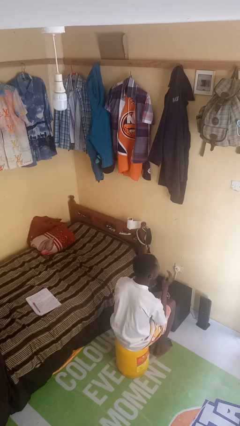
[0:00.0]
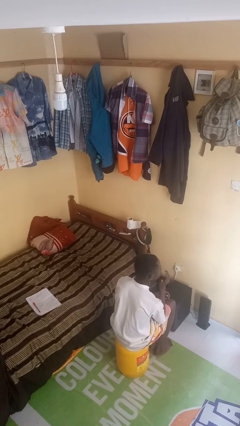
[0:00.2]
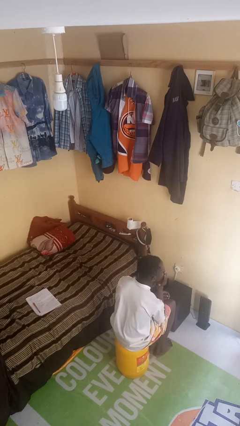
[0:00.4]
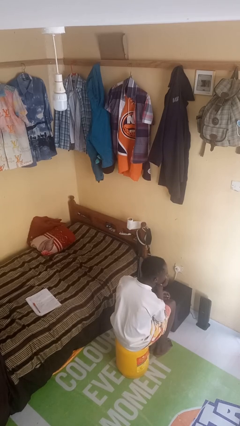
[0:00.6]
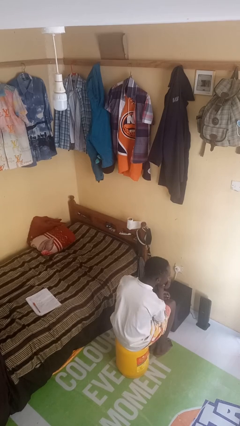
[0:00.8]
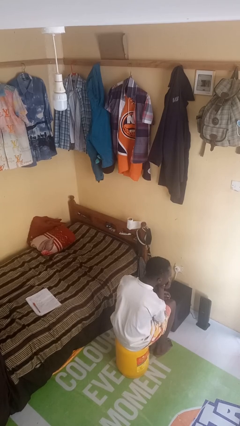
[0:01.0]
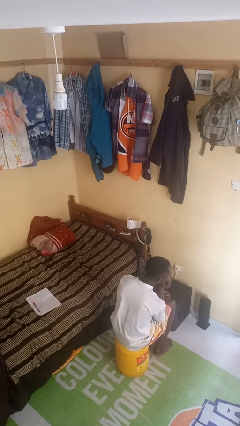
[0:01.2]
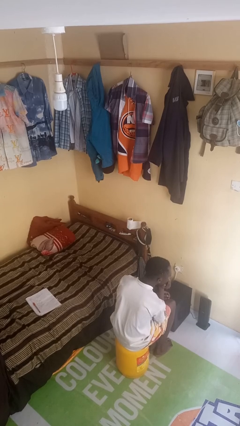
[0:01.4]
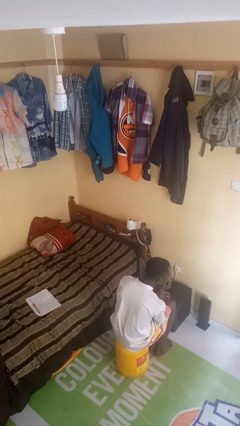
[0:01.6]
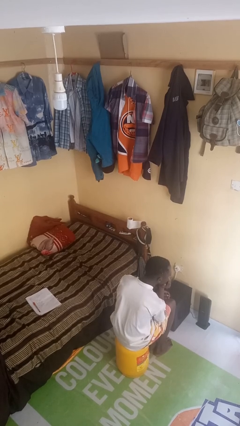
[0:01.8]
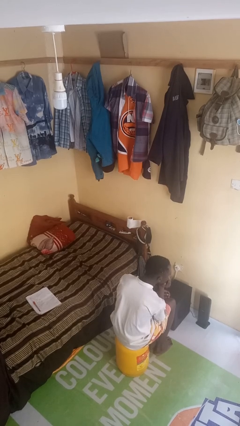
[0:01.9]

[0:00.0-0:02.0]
person strokes chin

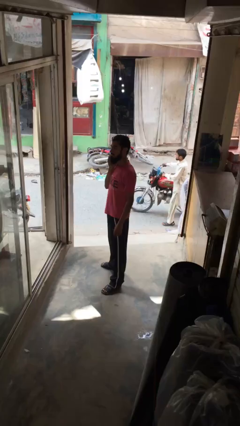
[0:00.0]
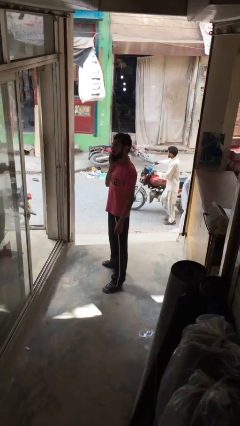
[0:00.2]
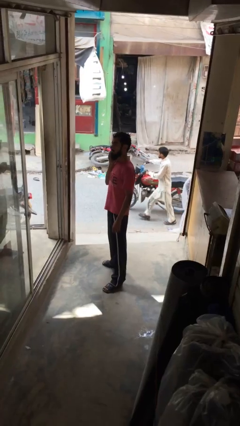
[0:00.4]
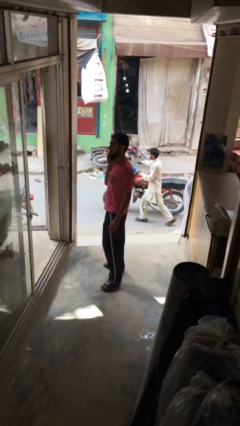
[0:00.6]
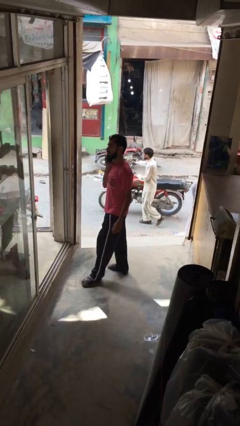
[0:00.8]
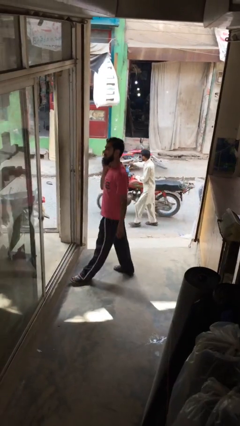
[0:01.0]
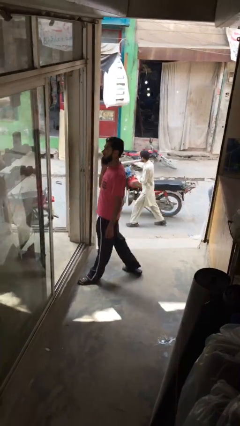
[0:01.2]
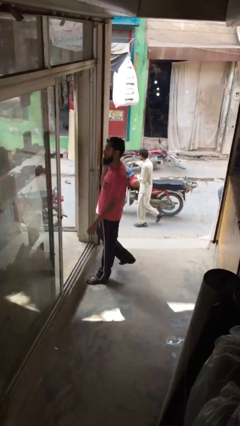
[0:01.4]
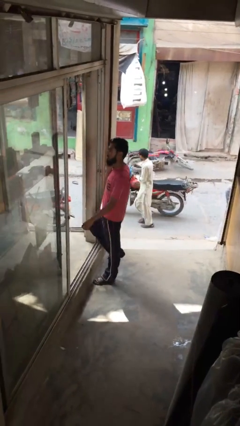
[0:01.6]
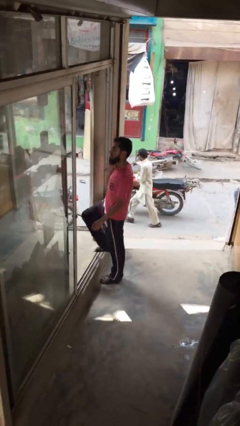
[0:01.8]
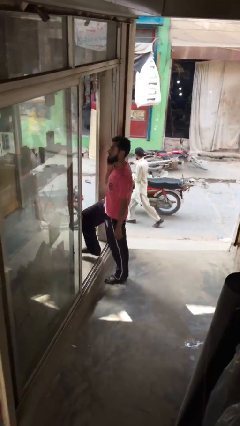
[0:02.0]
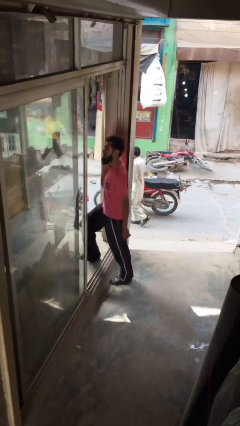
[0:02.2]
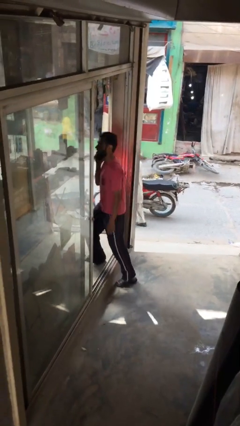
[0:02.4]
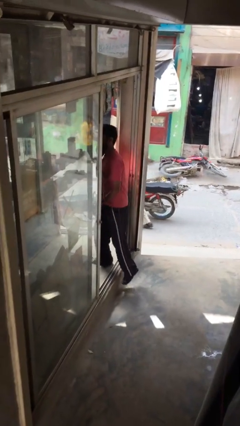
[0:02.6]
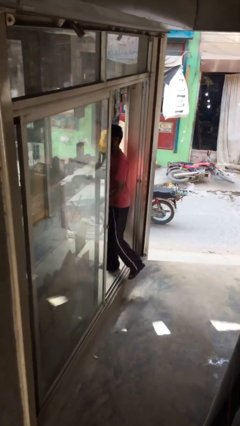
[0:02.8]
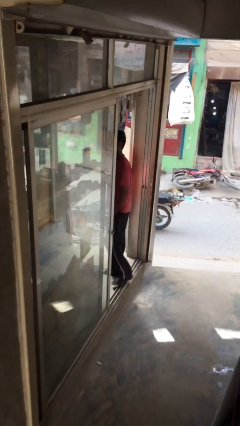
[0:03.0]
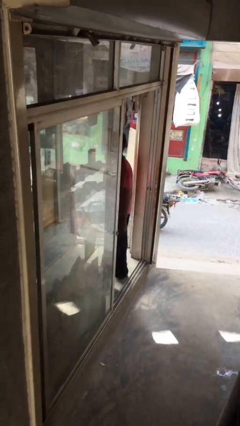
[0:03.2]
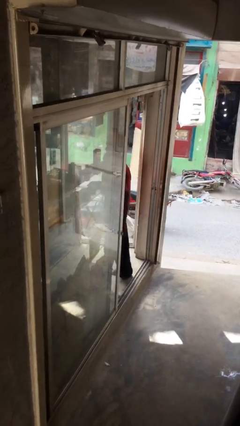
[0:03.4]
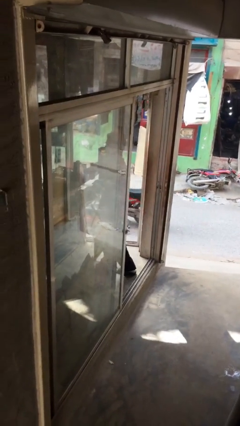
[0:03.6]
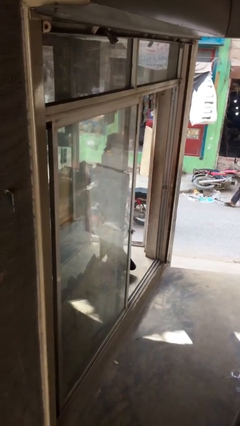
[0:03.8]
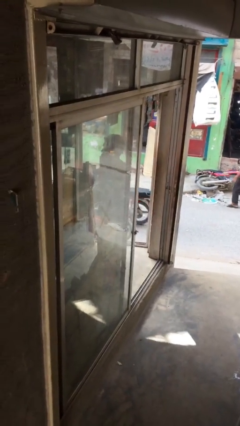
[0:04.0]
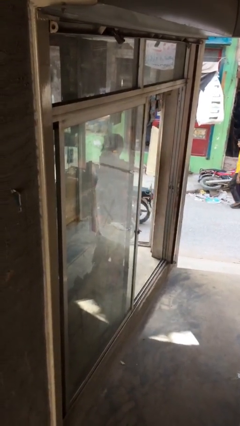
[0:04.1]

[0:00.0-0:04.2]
person exits scene through structure

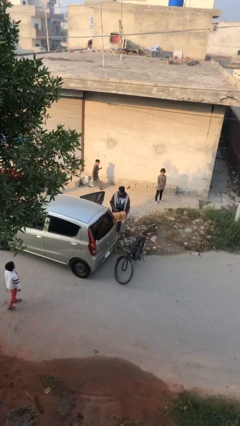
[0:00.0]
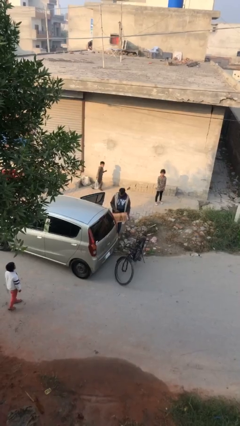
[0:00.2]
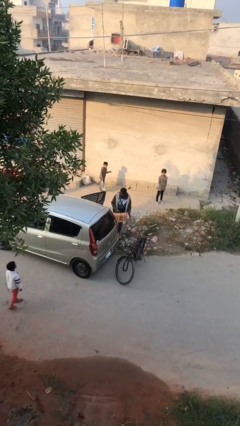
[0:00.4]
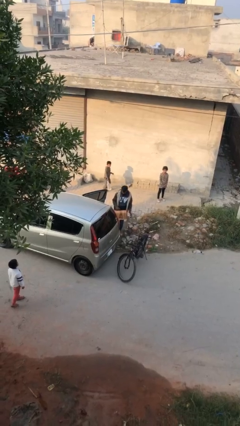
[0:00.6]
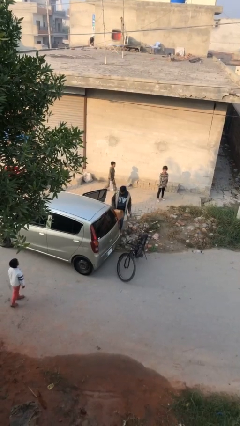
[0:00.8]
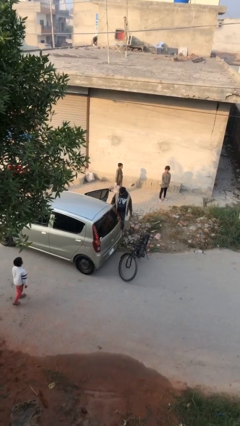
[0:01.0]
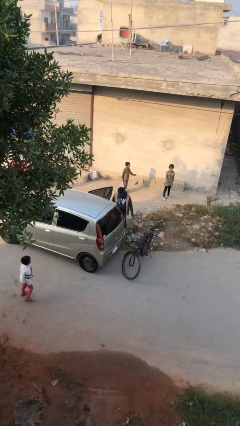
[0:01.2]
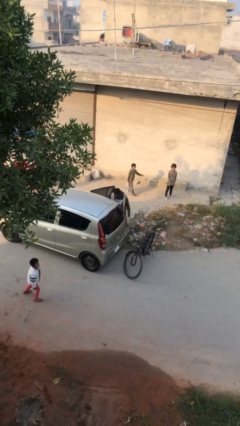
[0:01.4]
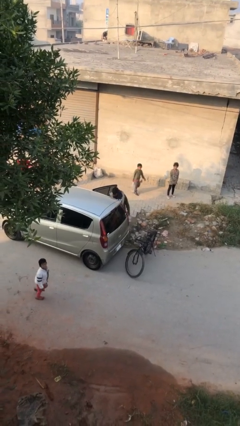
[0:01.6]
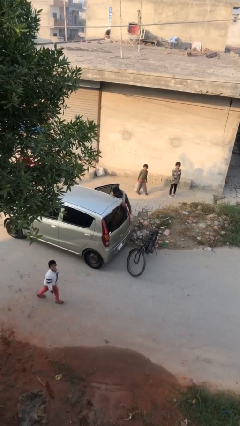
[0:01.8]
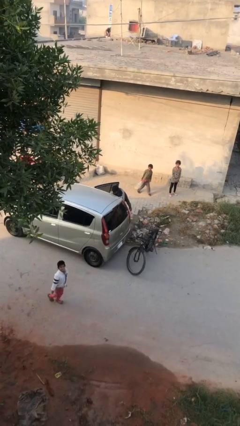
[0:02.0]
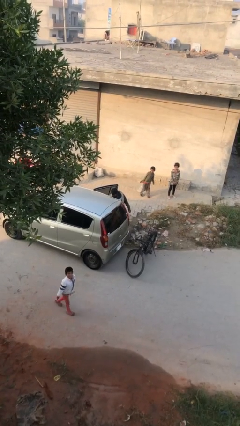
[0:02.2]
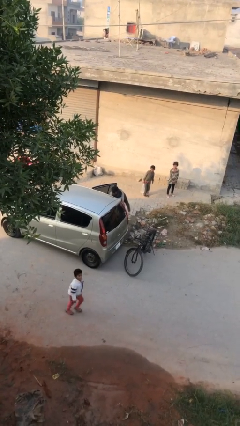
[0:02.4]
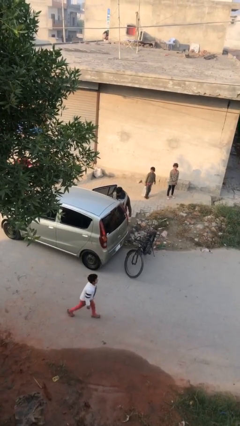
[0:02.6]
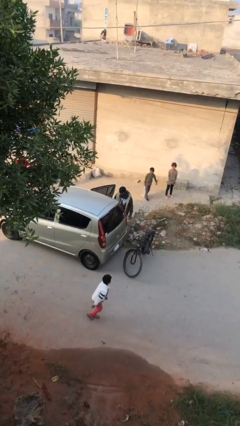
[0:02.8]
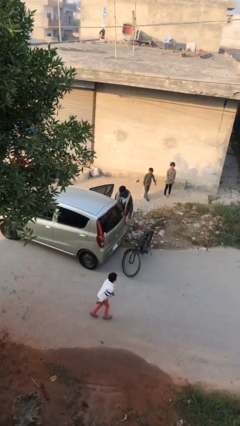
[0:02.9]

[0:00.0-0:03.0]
person loads car

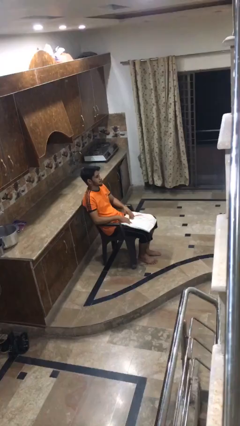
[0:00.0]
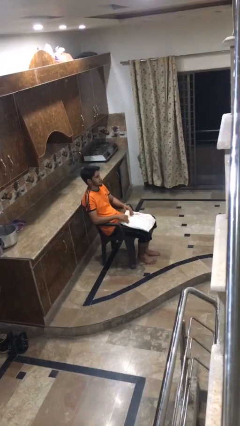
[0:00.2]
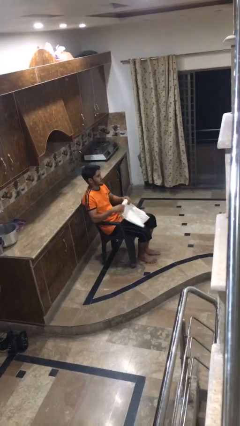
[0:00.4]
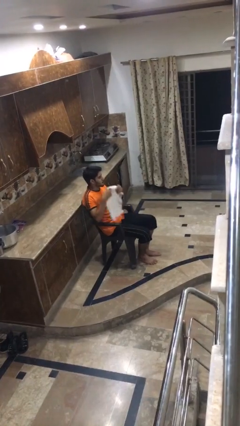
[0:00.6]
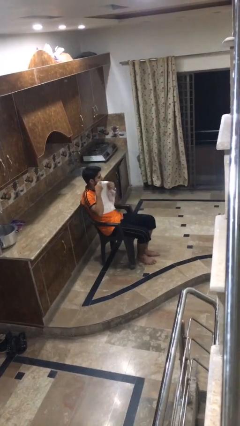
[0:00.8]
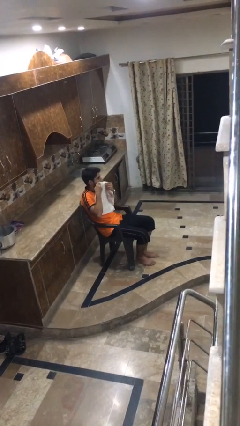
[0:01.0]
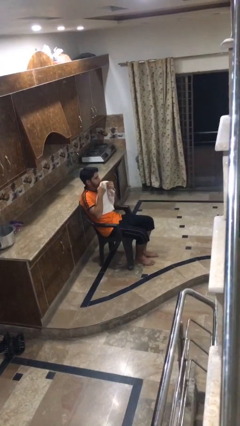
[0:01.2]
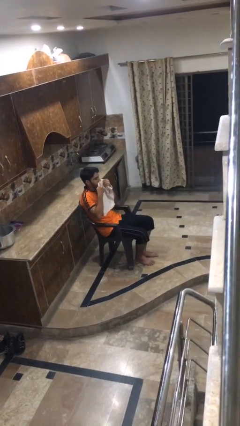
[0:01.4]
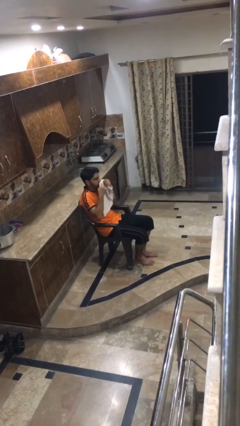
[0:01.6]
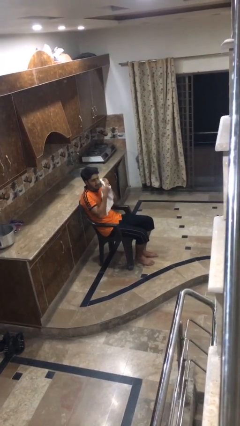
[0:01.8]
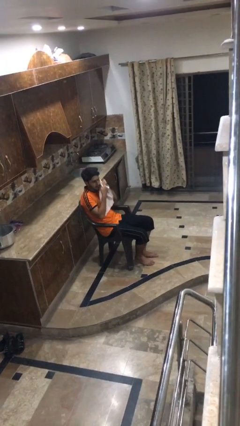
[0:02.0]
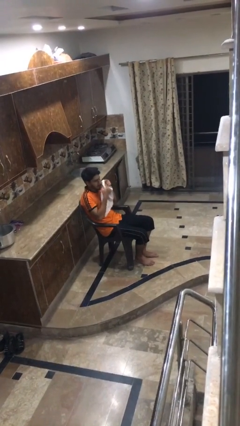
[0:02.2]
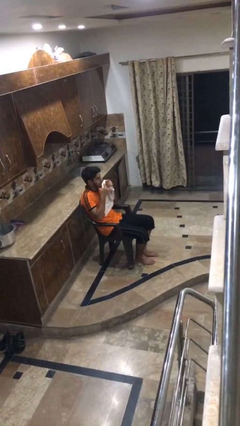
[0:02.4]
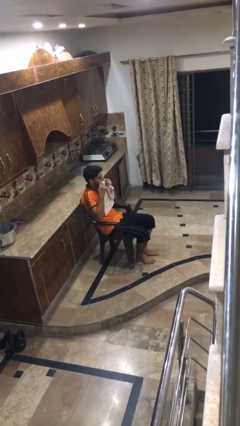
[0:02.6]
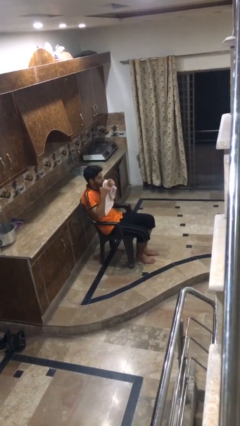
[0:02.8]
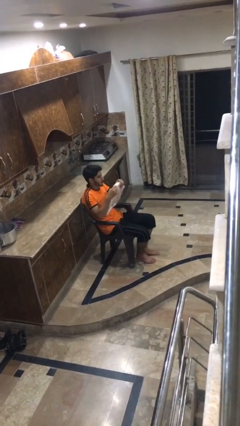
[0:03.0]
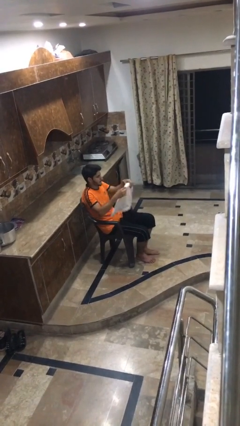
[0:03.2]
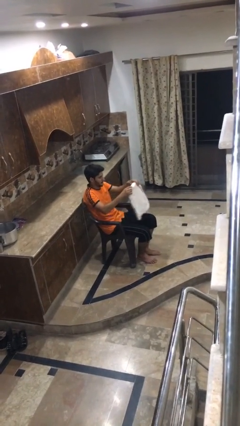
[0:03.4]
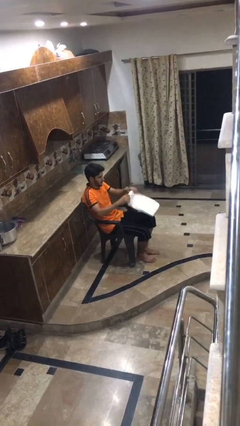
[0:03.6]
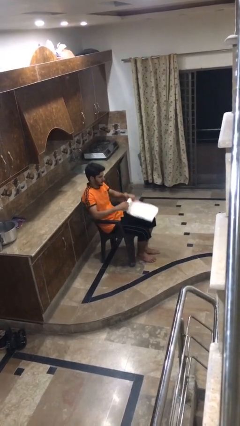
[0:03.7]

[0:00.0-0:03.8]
person wipes mouth with napkin

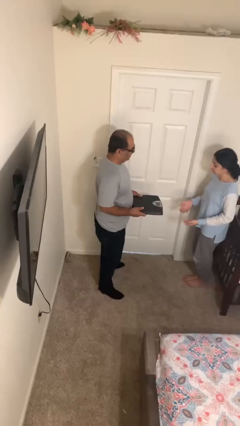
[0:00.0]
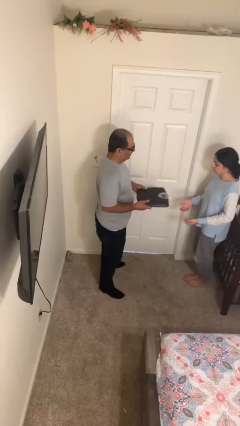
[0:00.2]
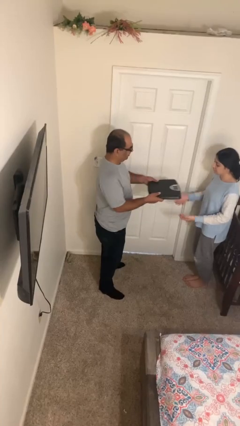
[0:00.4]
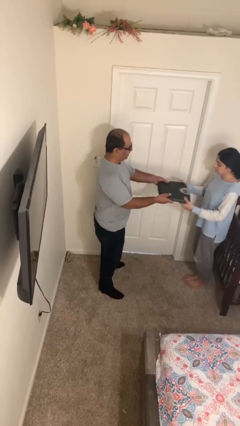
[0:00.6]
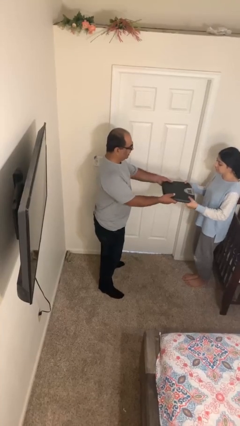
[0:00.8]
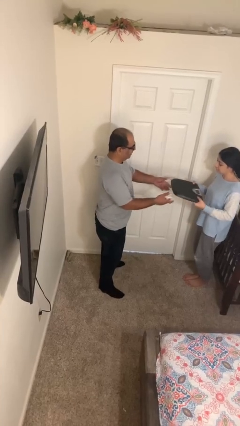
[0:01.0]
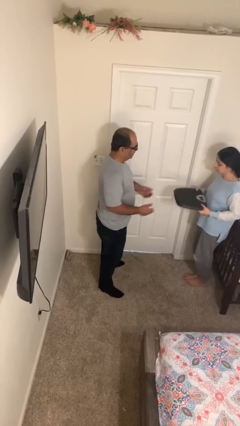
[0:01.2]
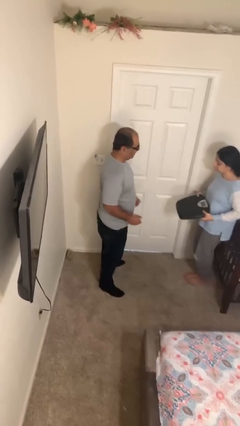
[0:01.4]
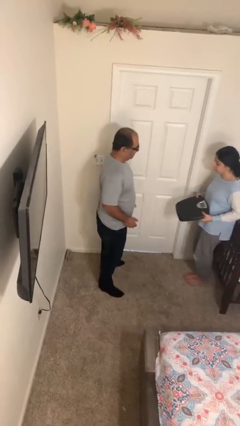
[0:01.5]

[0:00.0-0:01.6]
person transfers object to person

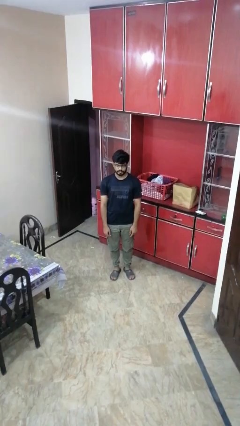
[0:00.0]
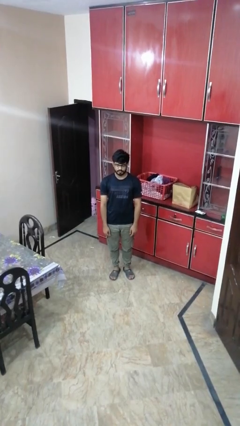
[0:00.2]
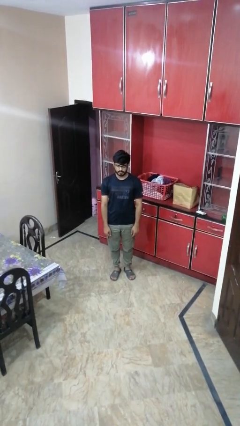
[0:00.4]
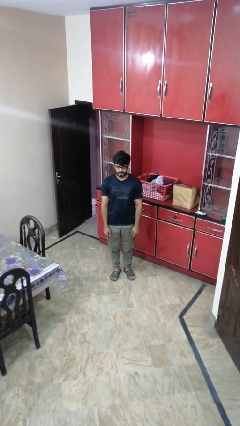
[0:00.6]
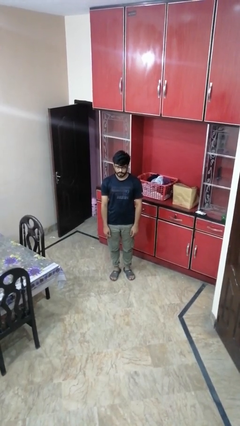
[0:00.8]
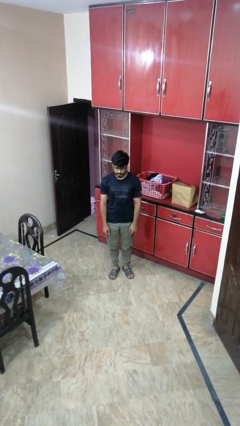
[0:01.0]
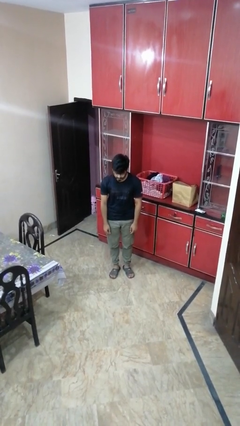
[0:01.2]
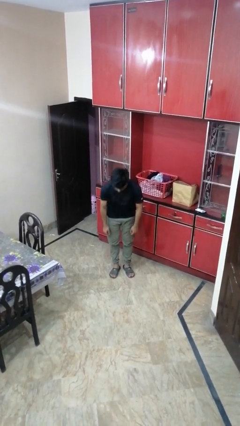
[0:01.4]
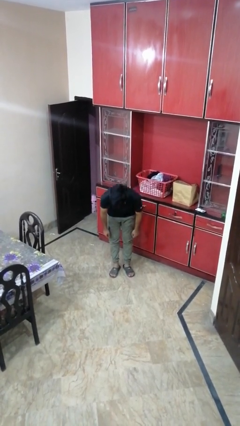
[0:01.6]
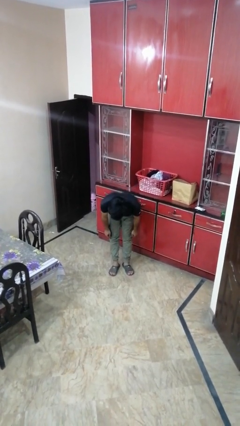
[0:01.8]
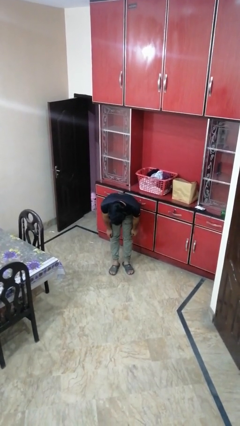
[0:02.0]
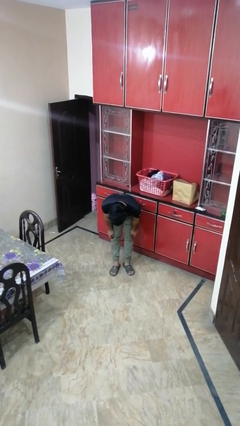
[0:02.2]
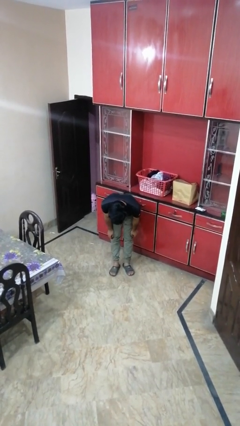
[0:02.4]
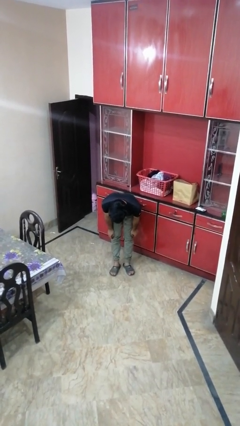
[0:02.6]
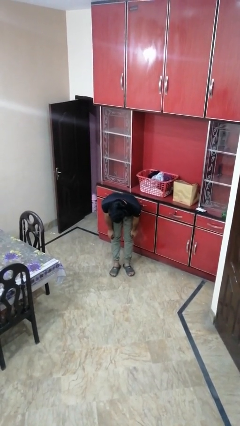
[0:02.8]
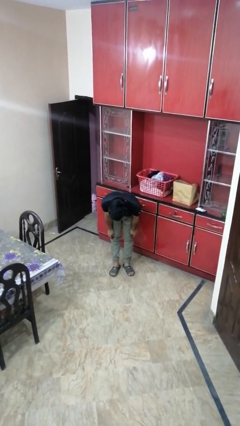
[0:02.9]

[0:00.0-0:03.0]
person bows

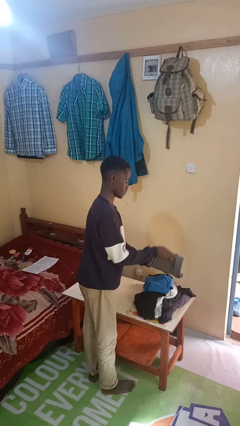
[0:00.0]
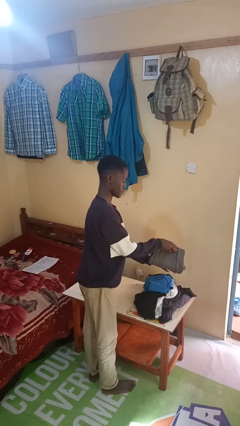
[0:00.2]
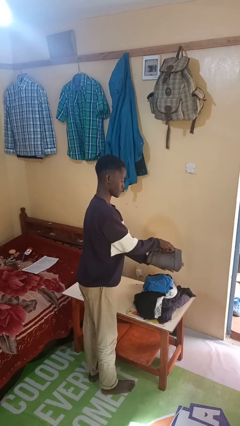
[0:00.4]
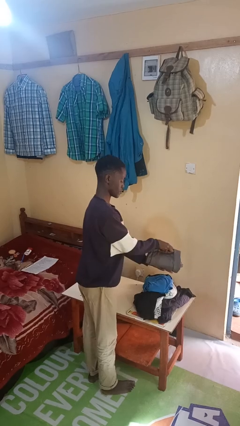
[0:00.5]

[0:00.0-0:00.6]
person folds pants
